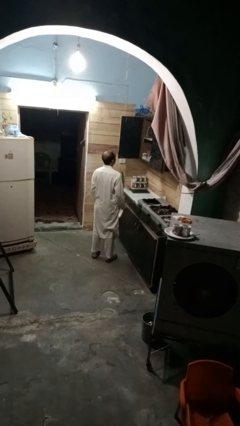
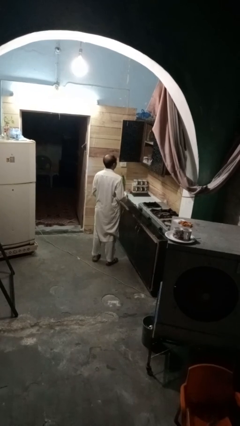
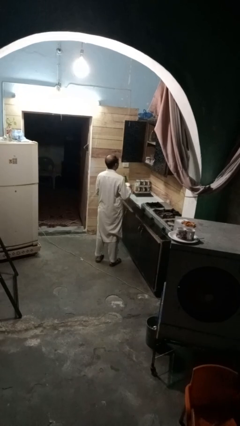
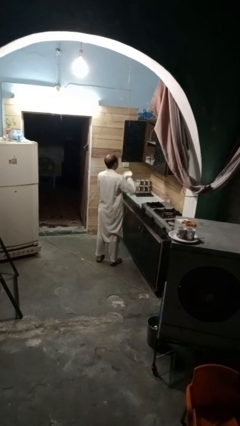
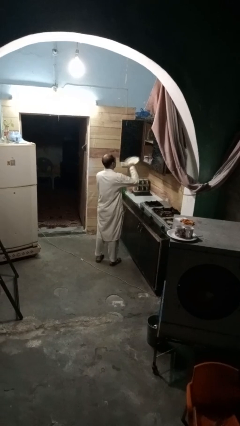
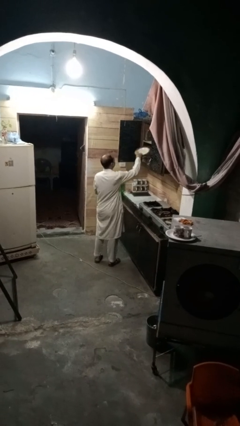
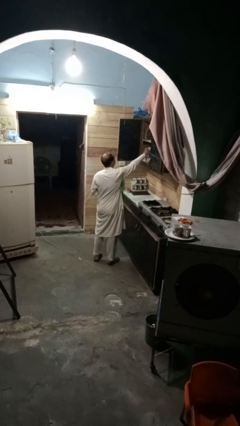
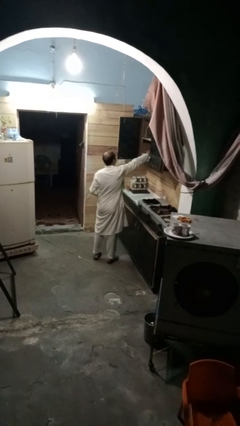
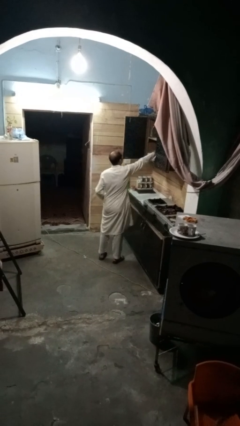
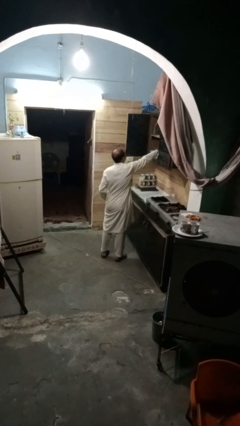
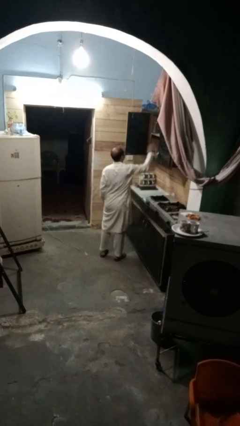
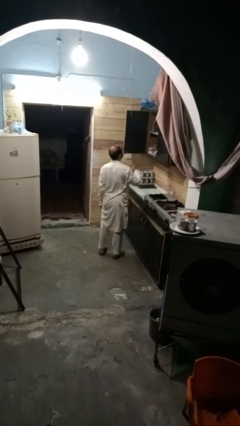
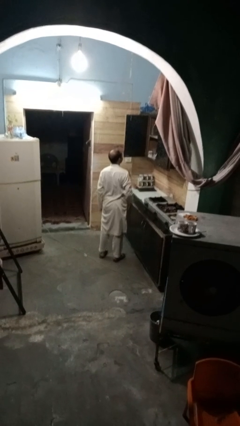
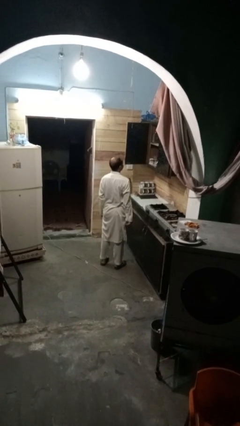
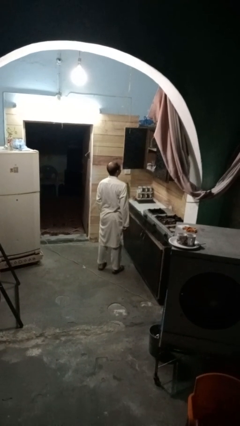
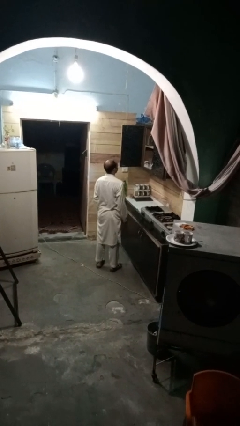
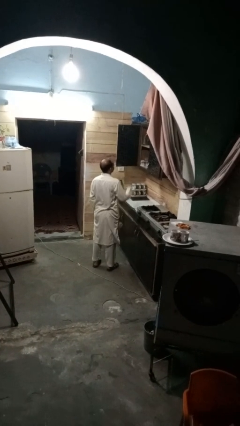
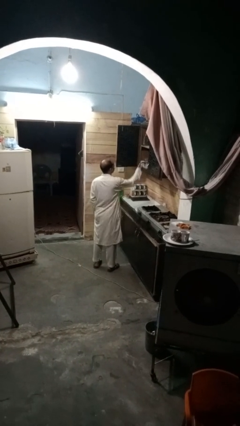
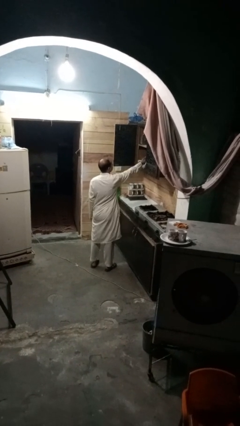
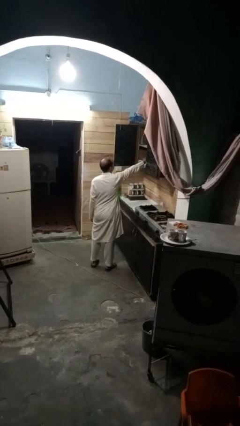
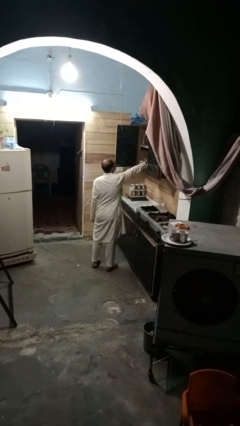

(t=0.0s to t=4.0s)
person puts object in cabinet

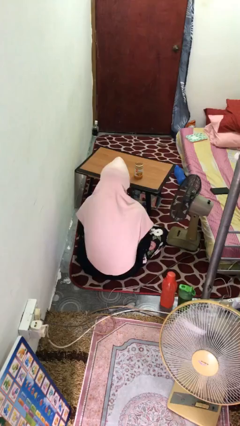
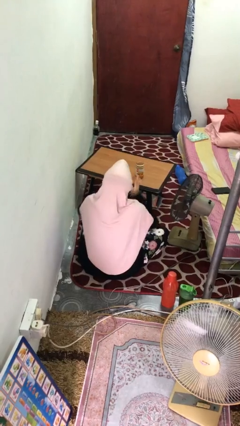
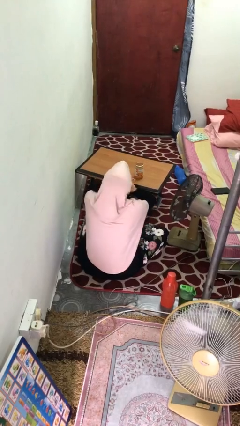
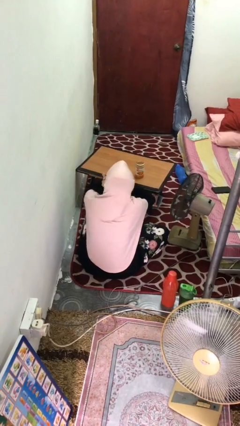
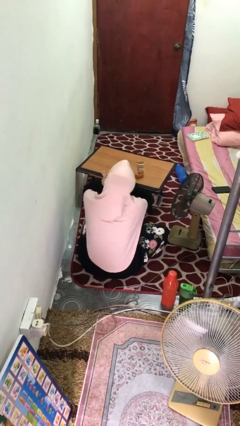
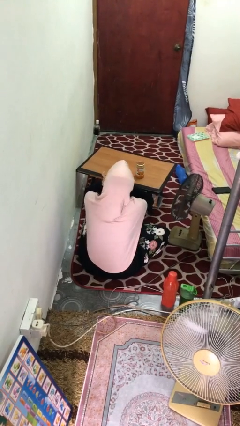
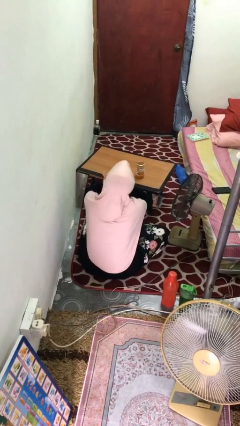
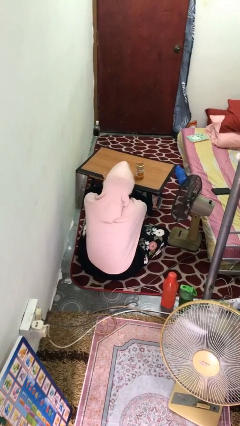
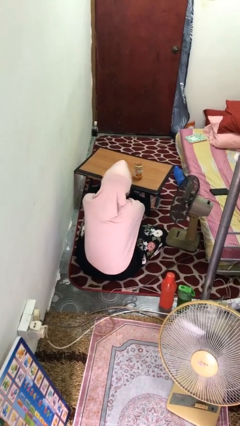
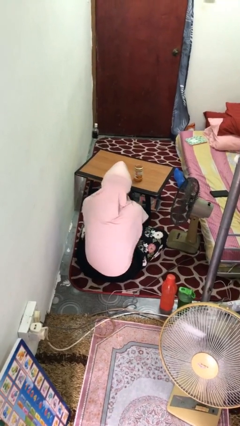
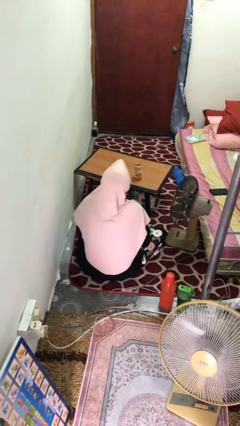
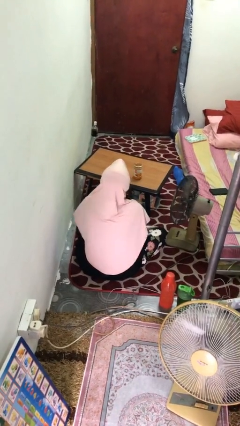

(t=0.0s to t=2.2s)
person puts fingers in ear

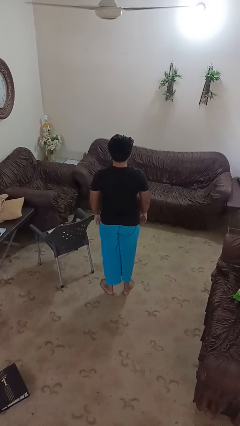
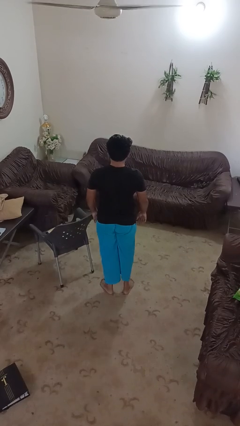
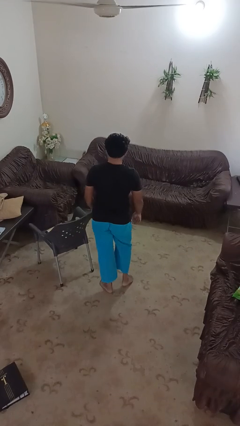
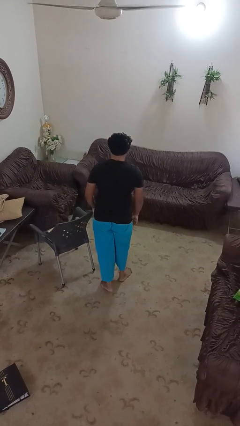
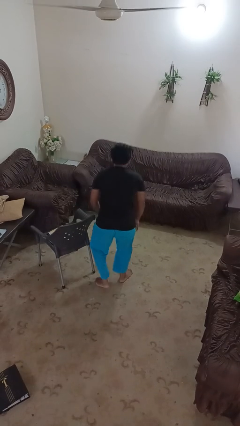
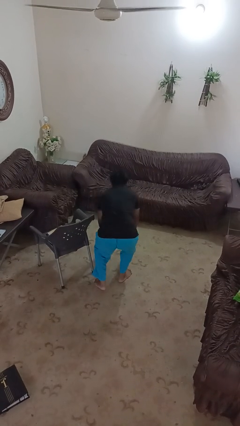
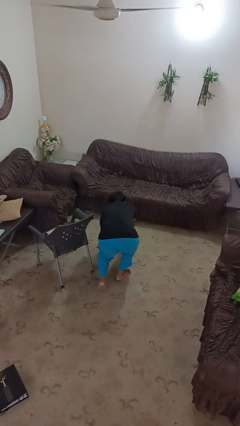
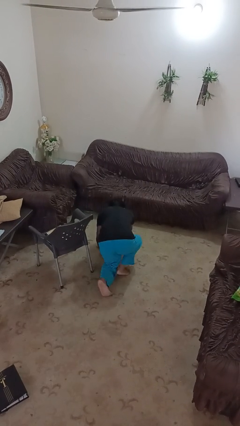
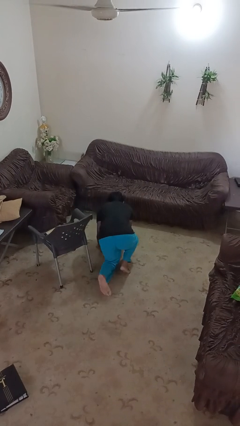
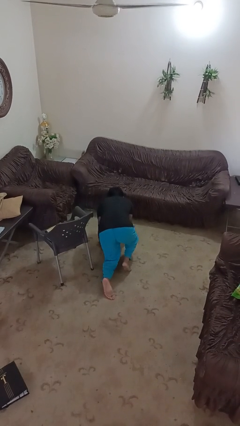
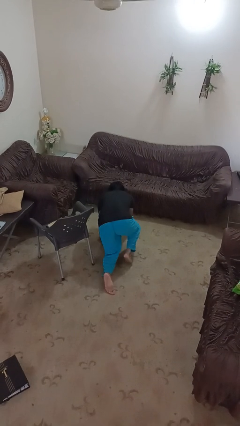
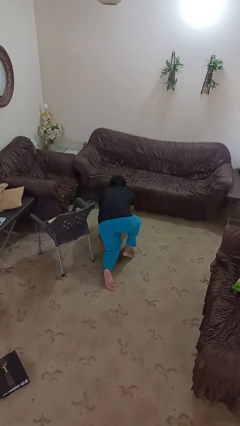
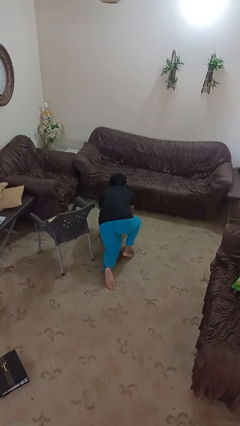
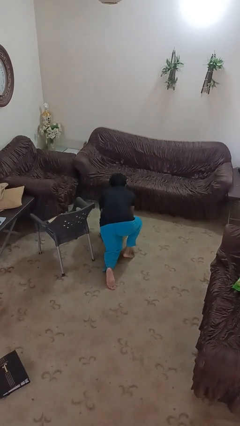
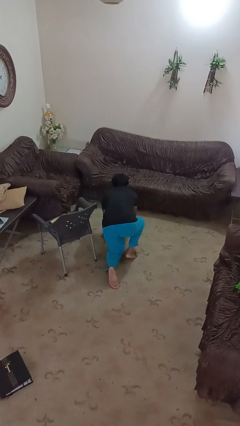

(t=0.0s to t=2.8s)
person trips on object on floor

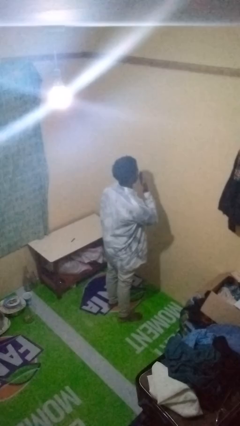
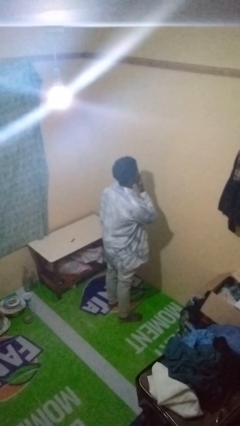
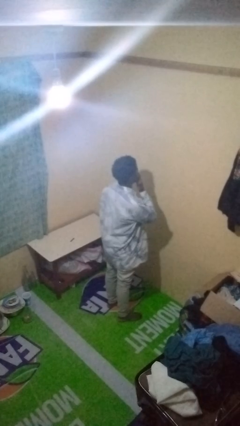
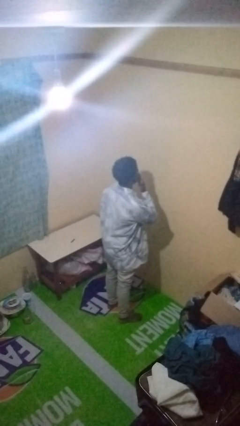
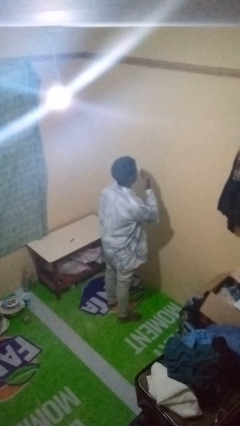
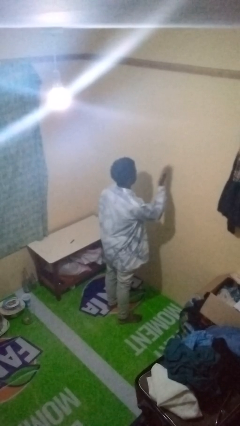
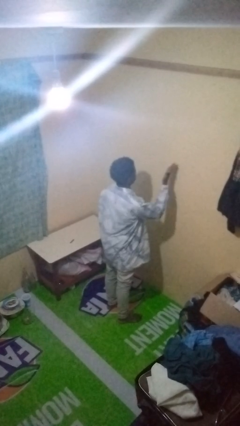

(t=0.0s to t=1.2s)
person gestures blow kiss

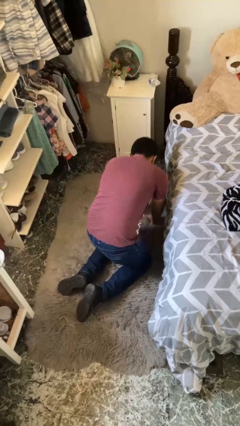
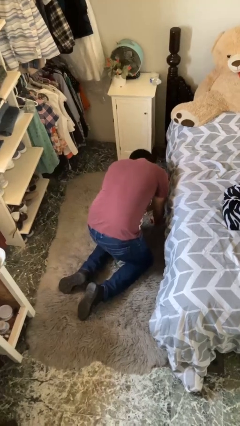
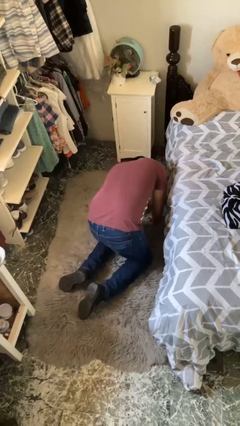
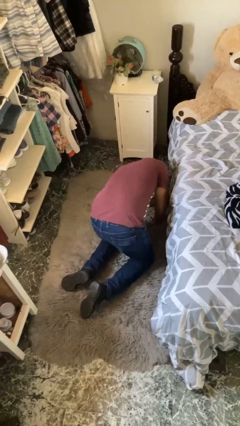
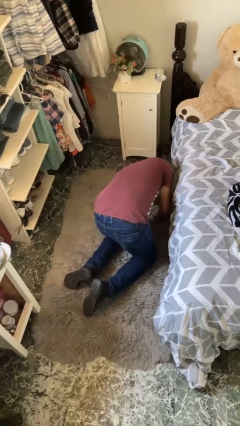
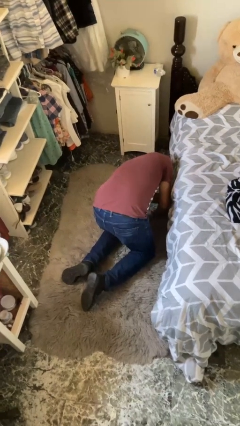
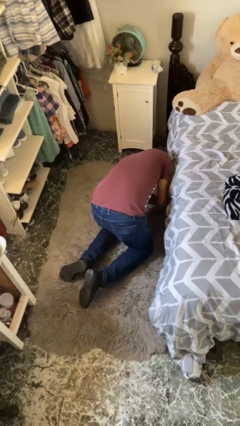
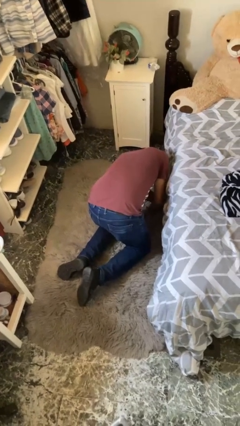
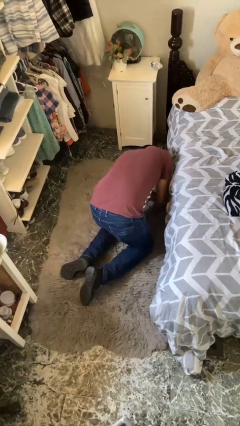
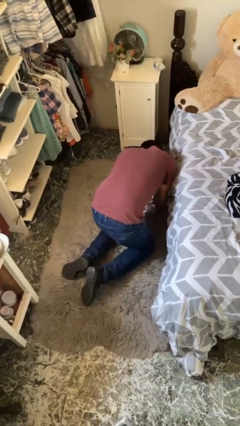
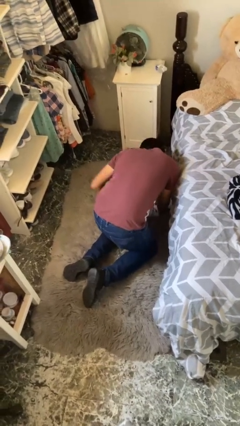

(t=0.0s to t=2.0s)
person searches under bed

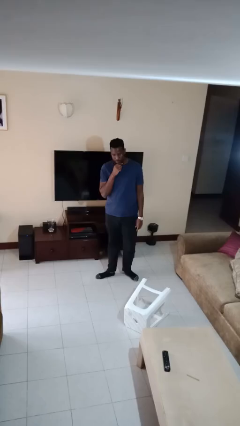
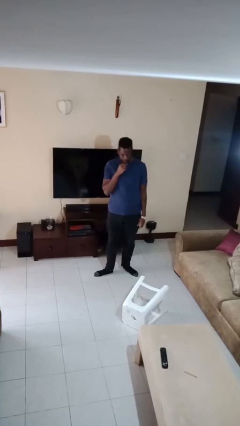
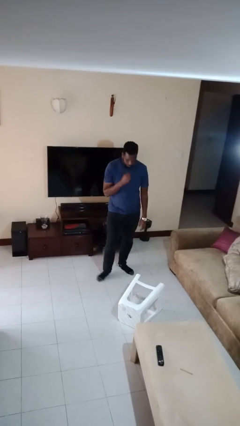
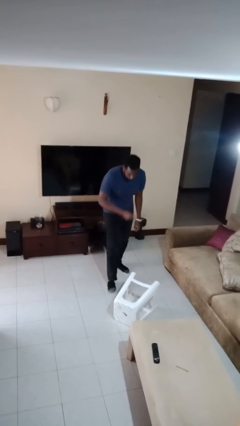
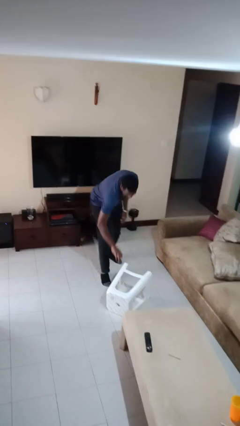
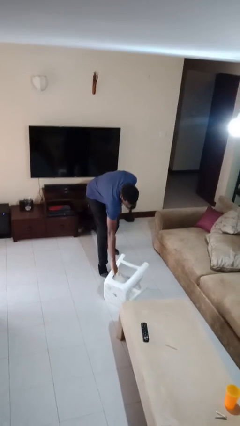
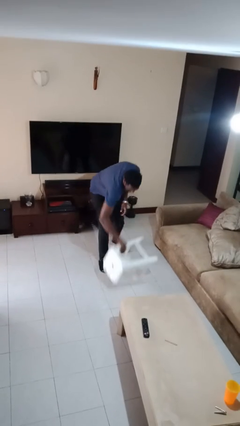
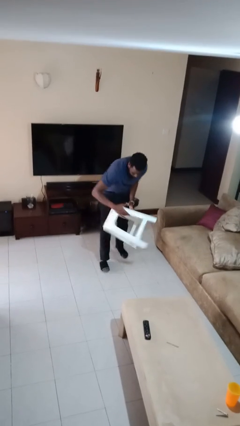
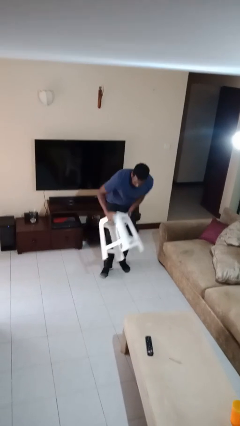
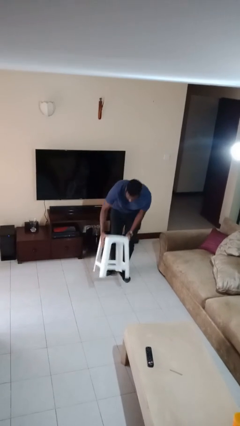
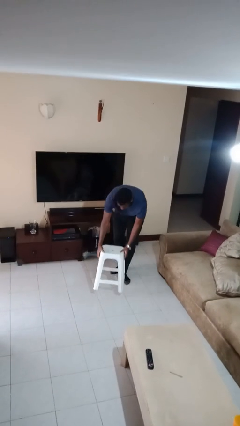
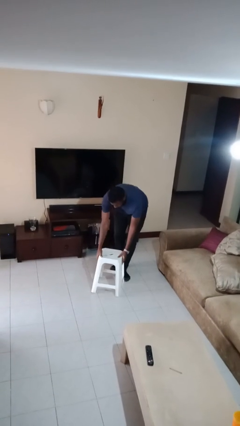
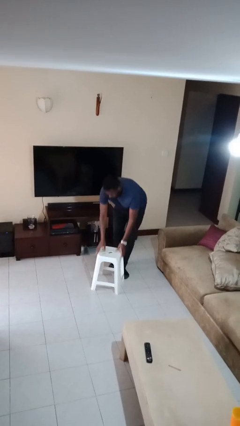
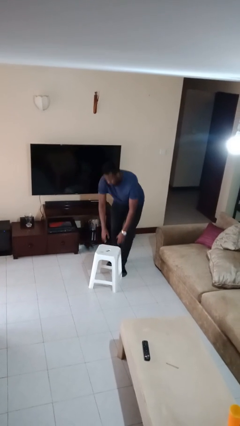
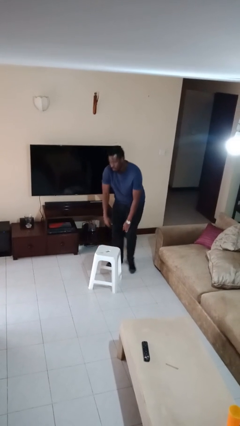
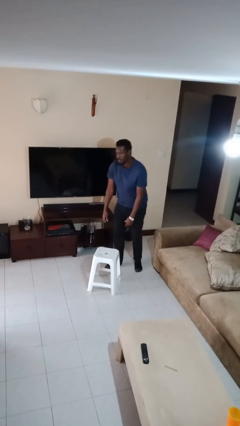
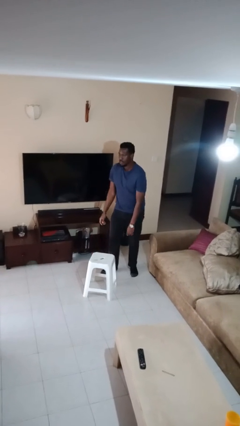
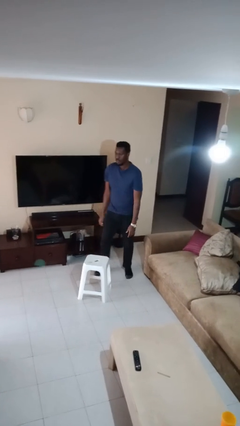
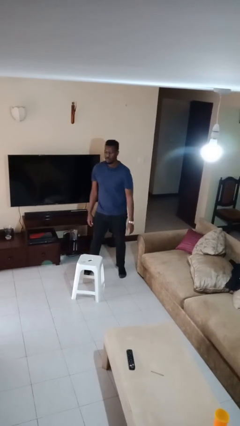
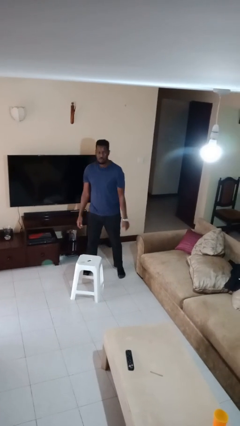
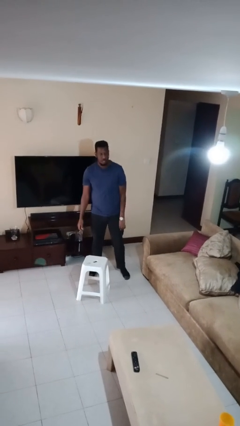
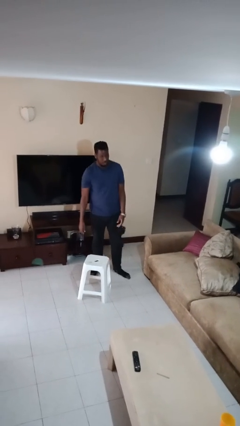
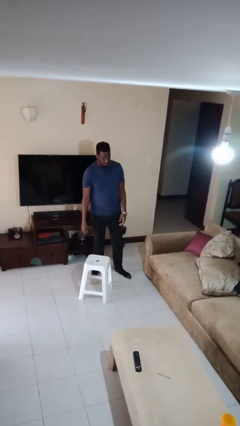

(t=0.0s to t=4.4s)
person sets upright furniture

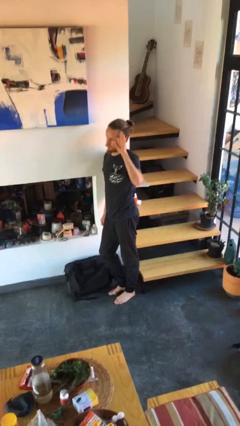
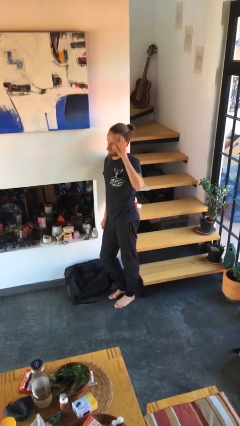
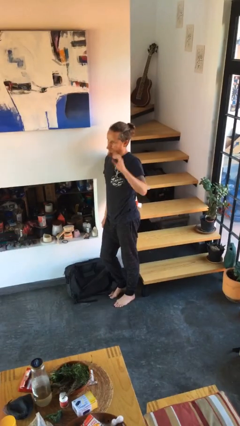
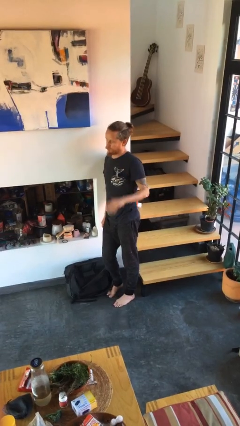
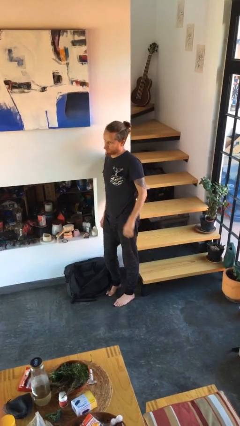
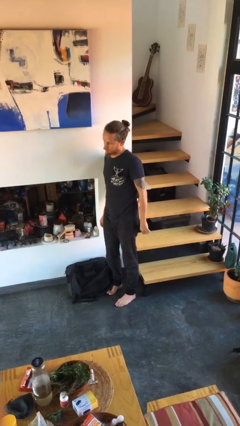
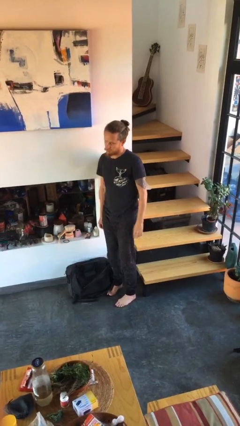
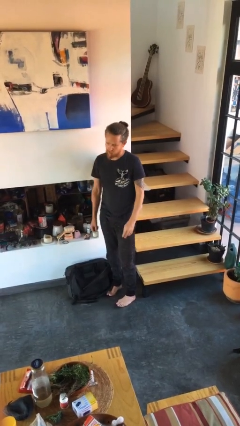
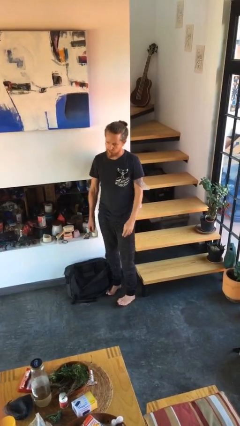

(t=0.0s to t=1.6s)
person gestures lower hand
